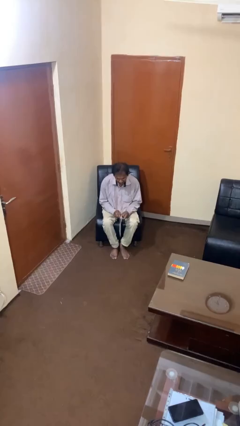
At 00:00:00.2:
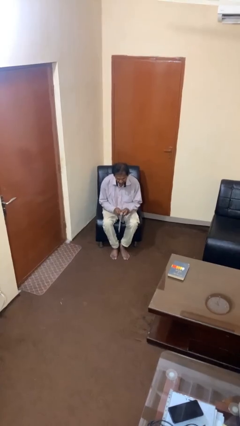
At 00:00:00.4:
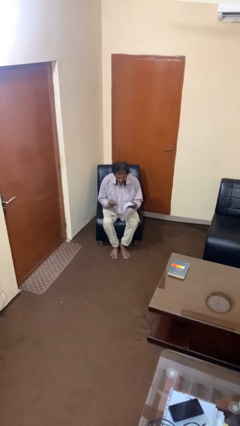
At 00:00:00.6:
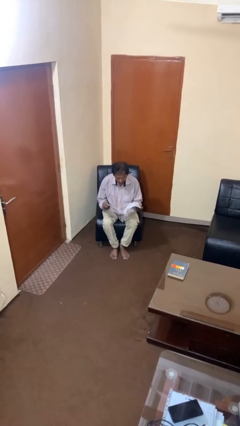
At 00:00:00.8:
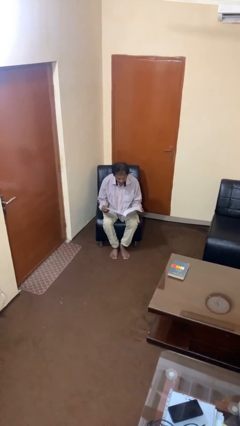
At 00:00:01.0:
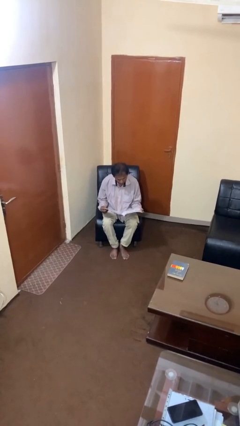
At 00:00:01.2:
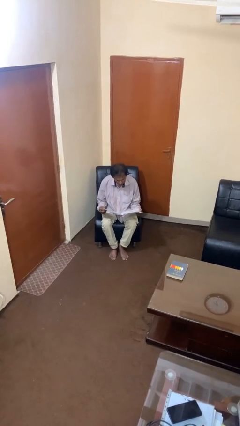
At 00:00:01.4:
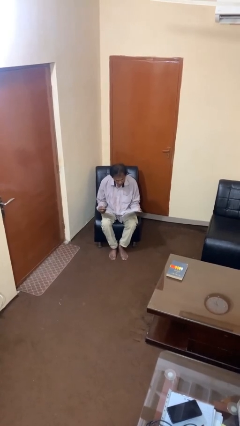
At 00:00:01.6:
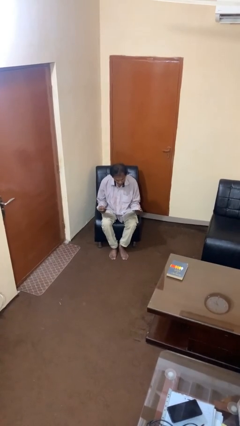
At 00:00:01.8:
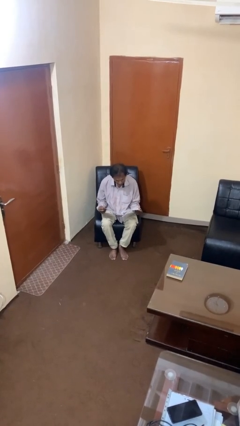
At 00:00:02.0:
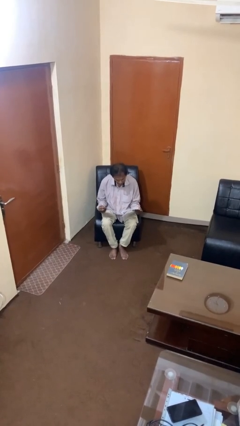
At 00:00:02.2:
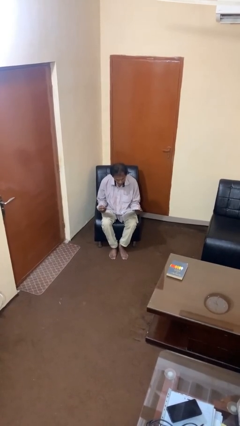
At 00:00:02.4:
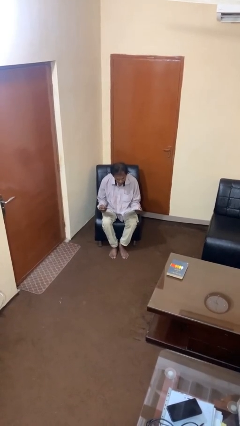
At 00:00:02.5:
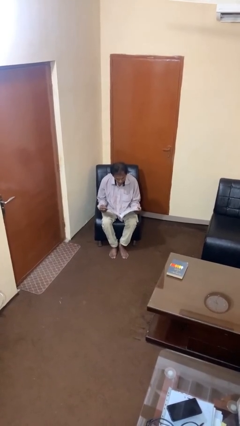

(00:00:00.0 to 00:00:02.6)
person reads magazine

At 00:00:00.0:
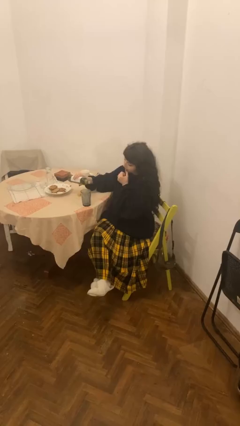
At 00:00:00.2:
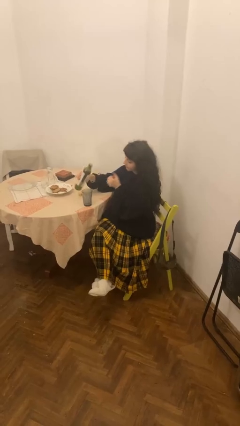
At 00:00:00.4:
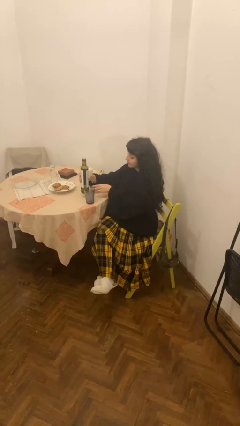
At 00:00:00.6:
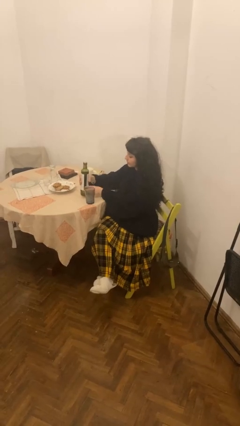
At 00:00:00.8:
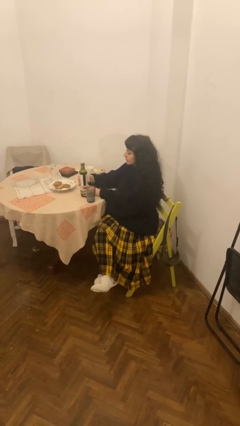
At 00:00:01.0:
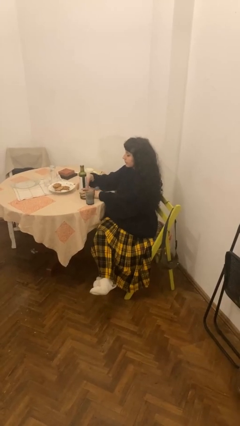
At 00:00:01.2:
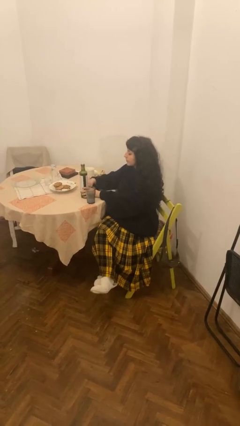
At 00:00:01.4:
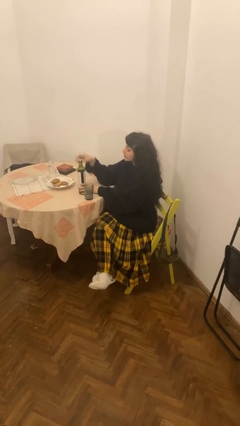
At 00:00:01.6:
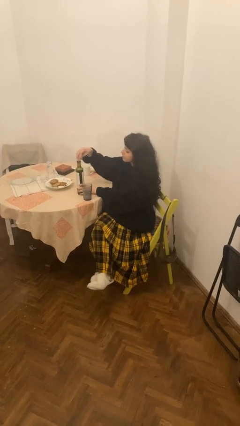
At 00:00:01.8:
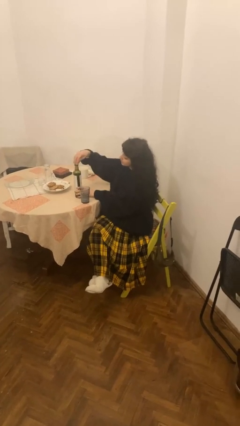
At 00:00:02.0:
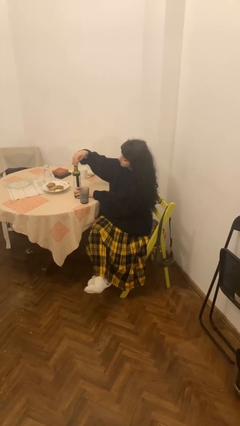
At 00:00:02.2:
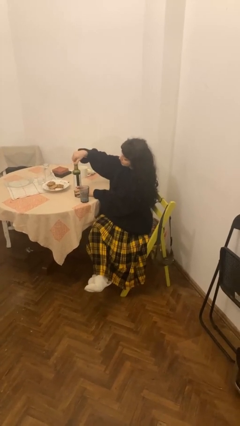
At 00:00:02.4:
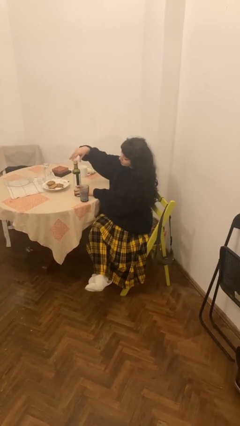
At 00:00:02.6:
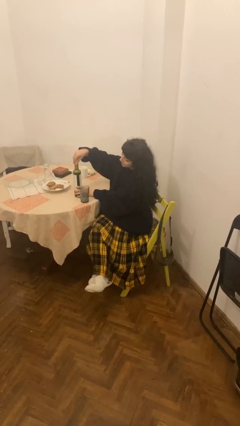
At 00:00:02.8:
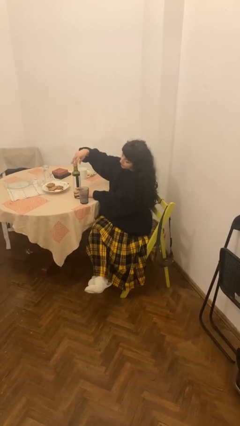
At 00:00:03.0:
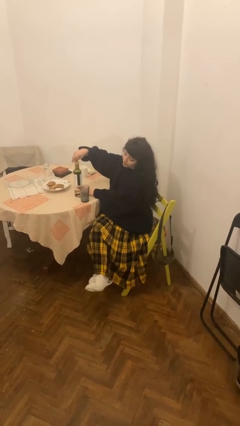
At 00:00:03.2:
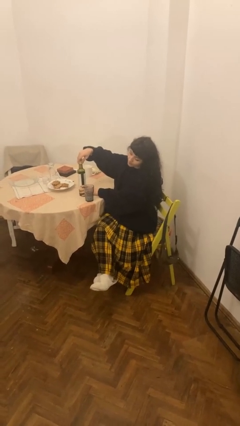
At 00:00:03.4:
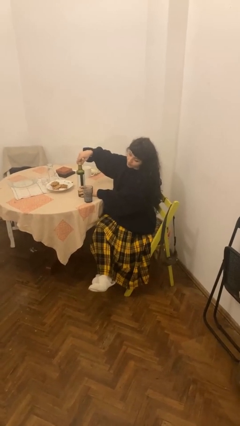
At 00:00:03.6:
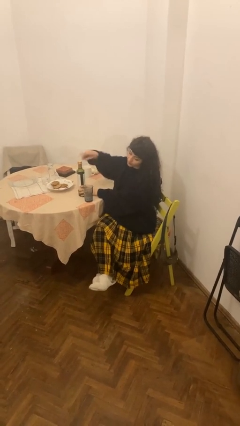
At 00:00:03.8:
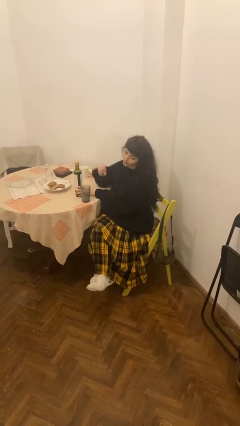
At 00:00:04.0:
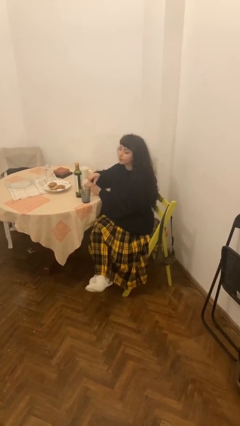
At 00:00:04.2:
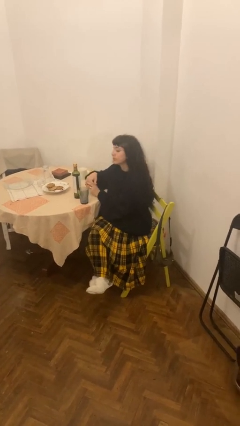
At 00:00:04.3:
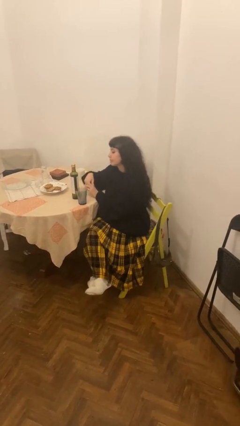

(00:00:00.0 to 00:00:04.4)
person screws lid to bottle

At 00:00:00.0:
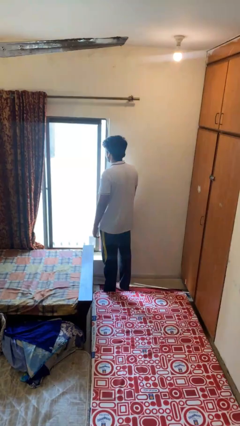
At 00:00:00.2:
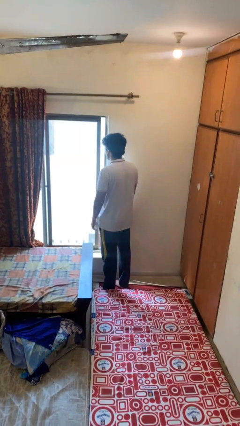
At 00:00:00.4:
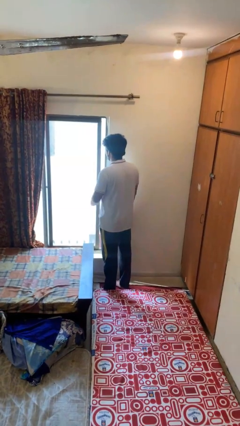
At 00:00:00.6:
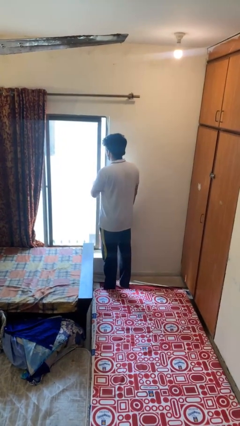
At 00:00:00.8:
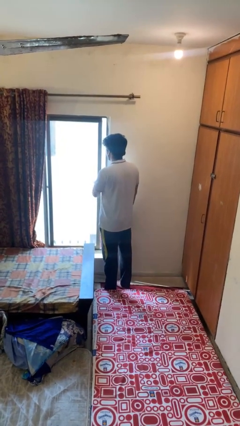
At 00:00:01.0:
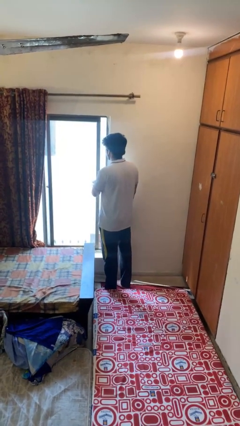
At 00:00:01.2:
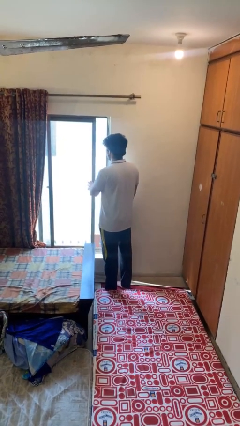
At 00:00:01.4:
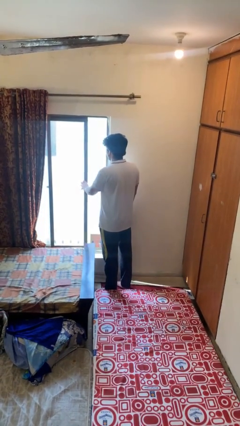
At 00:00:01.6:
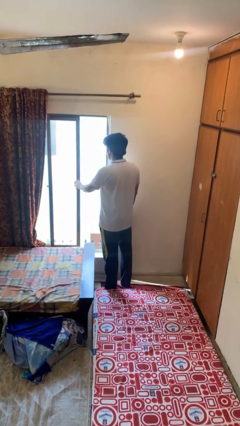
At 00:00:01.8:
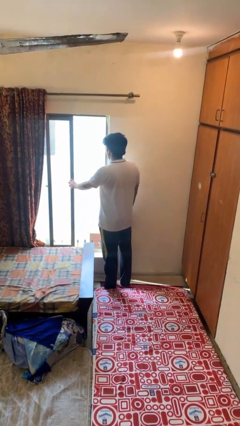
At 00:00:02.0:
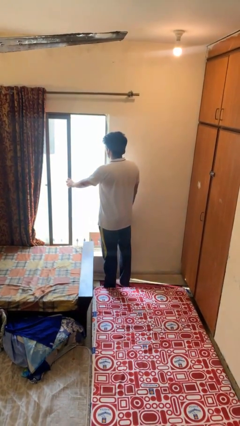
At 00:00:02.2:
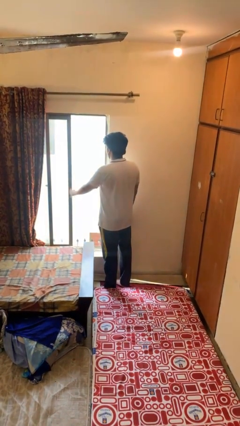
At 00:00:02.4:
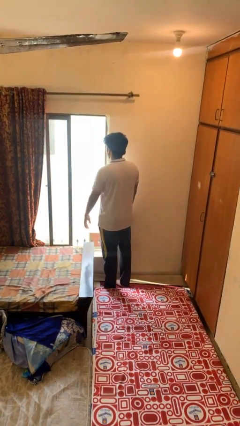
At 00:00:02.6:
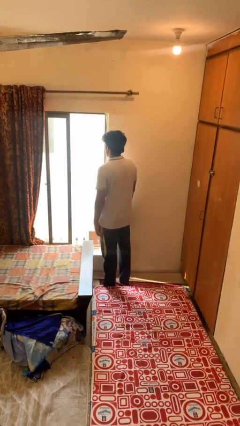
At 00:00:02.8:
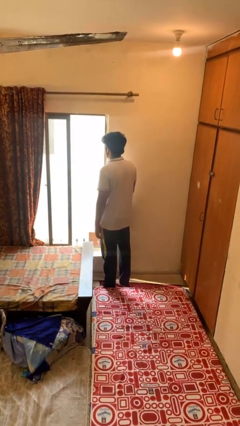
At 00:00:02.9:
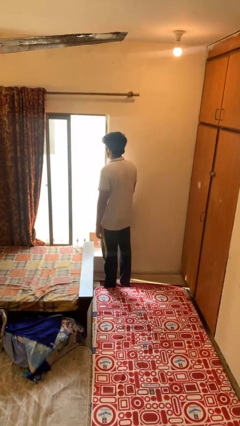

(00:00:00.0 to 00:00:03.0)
person opens home window

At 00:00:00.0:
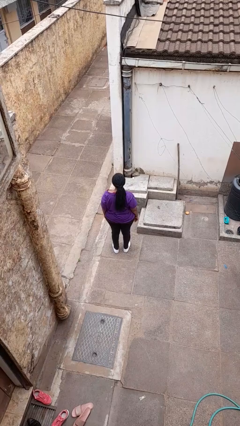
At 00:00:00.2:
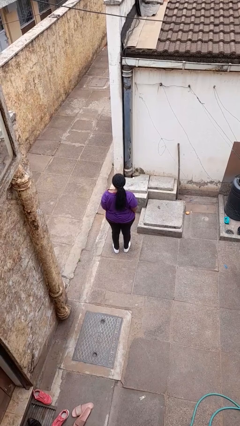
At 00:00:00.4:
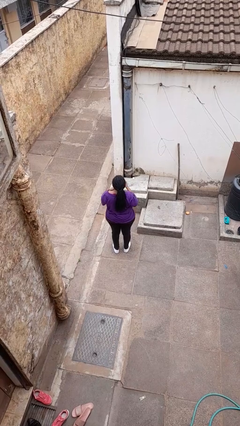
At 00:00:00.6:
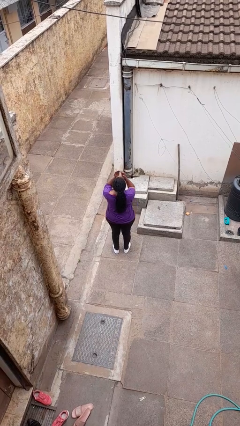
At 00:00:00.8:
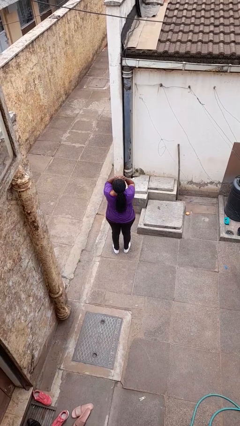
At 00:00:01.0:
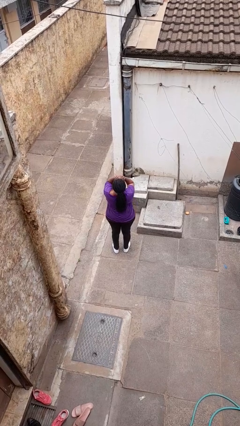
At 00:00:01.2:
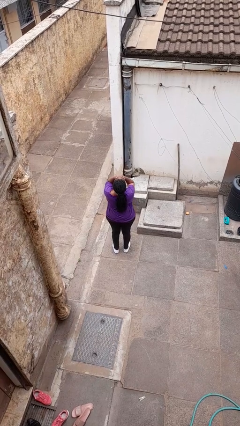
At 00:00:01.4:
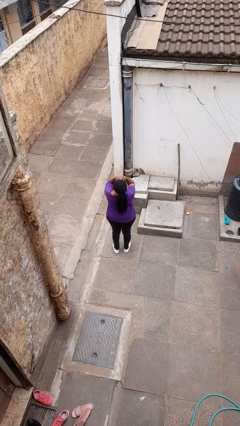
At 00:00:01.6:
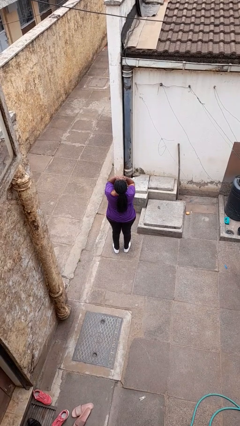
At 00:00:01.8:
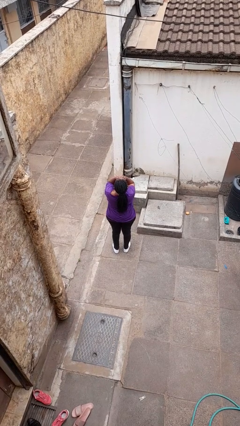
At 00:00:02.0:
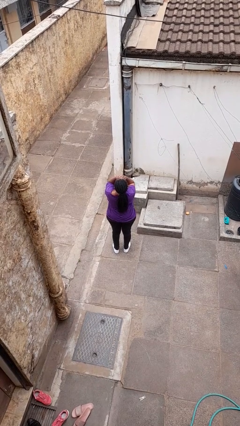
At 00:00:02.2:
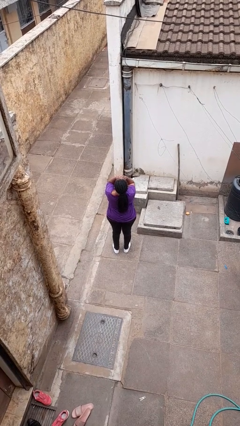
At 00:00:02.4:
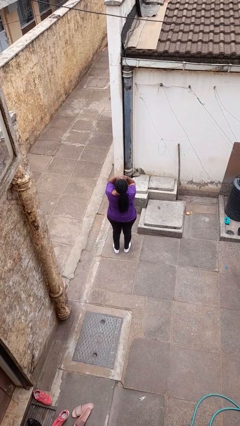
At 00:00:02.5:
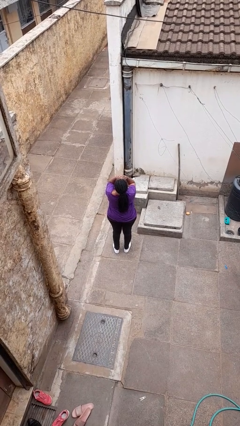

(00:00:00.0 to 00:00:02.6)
person covers face with hands

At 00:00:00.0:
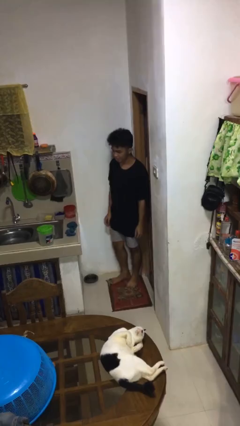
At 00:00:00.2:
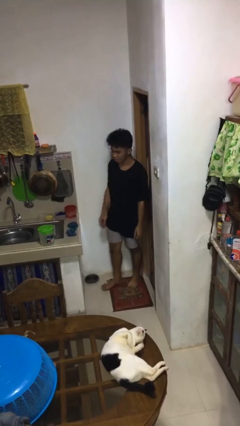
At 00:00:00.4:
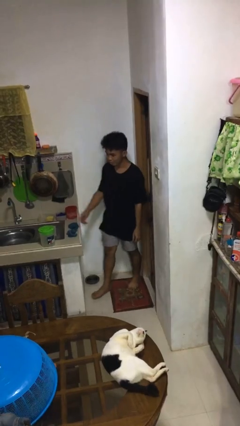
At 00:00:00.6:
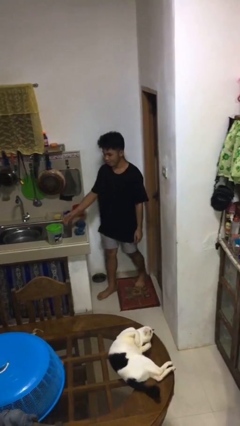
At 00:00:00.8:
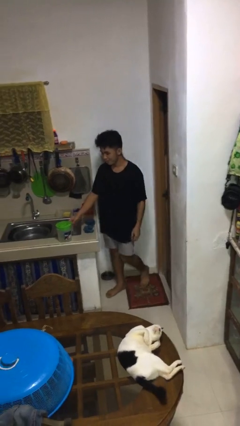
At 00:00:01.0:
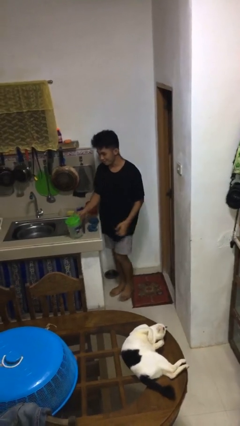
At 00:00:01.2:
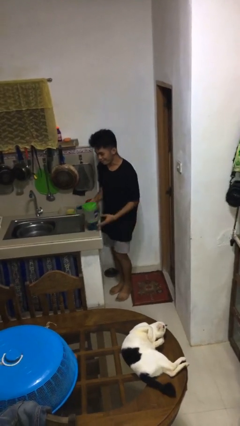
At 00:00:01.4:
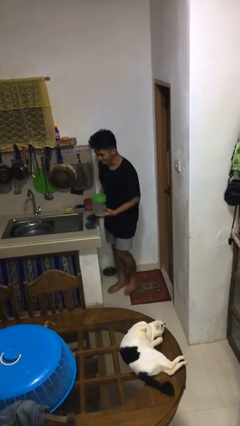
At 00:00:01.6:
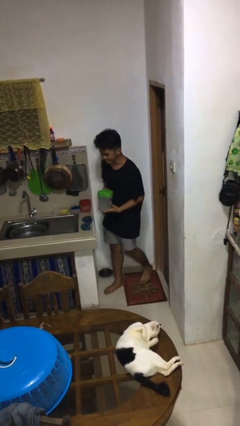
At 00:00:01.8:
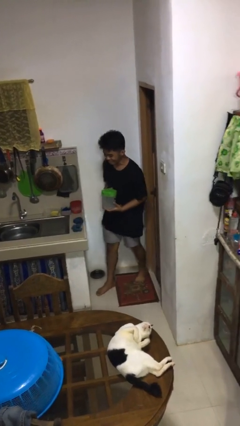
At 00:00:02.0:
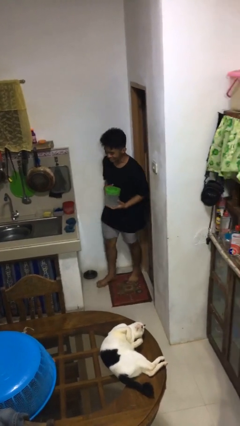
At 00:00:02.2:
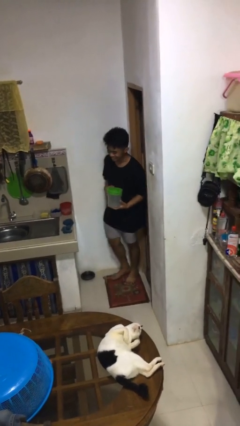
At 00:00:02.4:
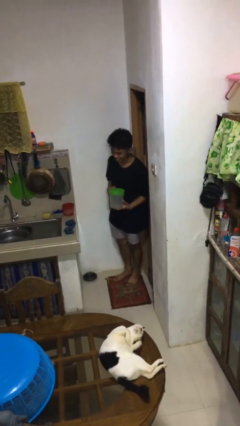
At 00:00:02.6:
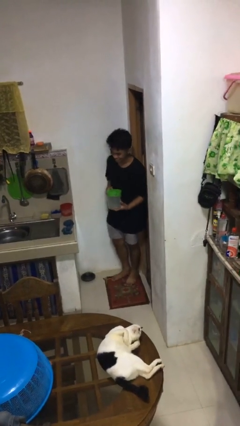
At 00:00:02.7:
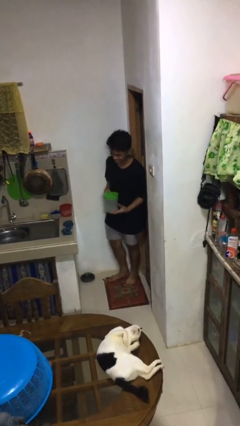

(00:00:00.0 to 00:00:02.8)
person picks up object from countertop

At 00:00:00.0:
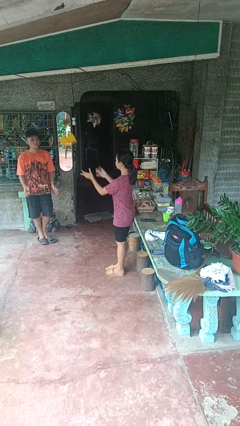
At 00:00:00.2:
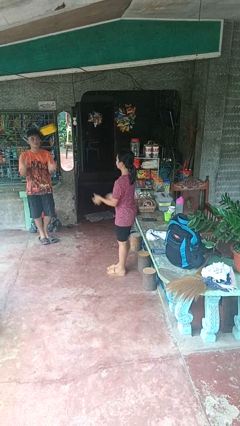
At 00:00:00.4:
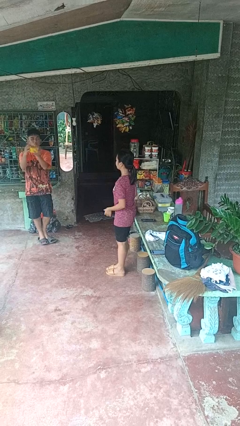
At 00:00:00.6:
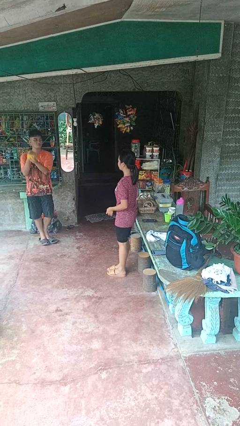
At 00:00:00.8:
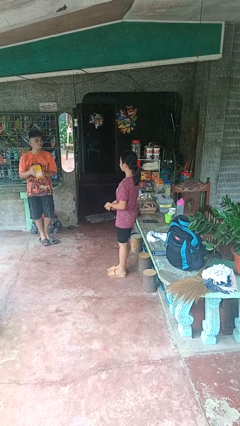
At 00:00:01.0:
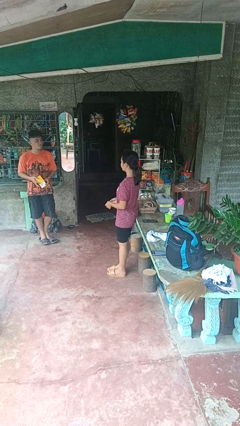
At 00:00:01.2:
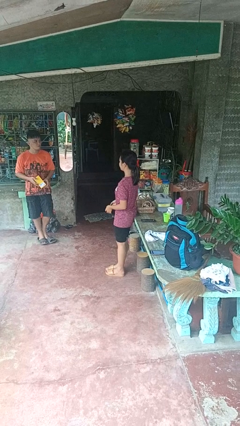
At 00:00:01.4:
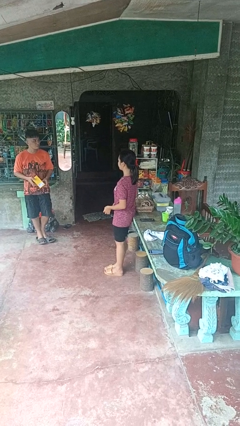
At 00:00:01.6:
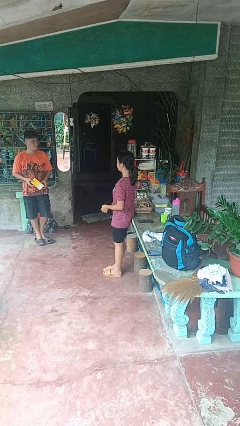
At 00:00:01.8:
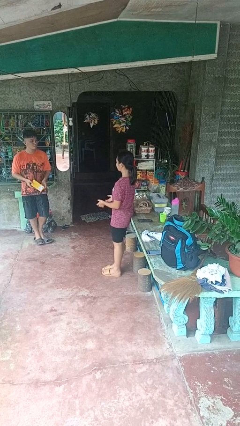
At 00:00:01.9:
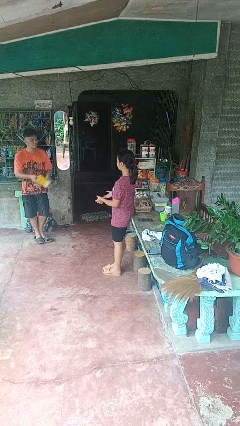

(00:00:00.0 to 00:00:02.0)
person throws object to person
